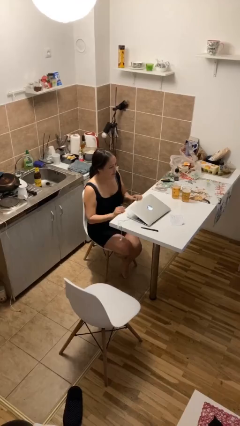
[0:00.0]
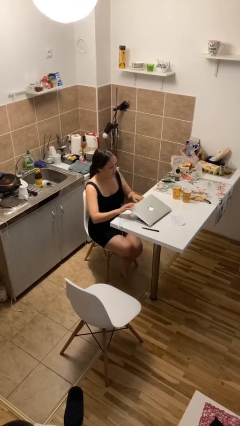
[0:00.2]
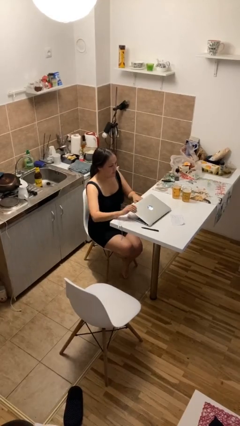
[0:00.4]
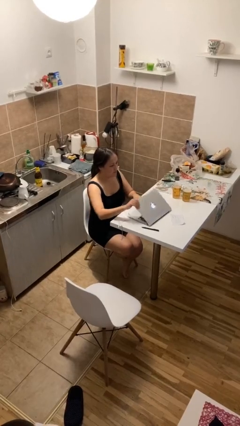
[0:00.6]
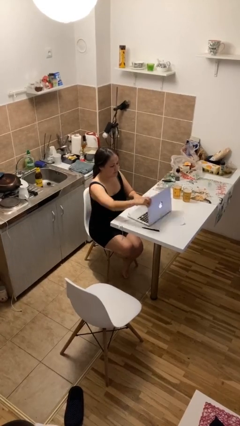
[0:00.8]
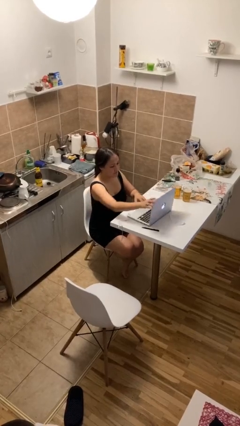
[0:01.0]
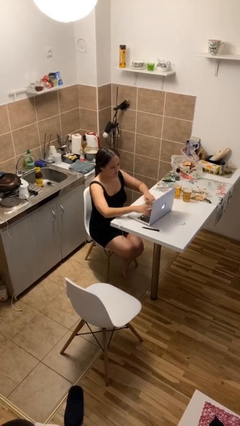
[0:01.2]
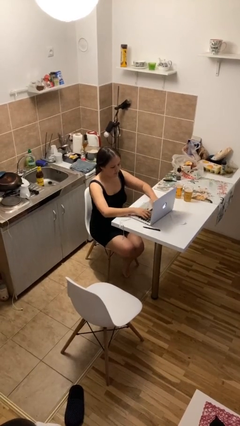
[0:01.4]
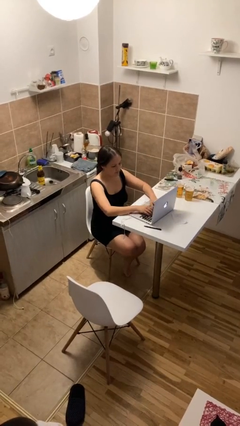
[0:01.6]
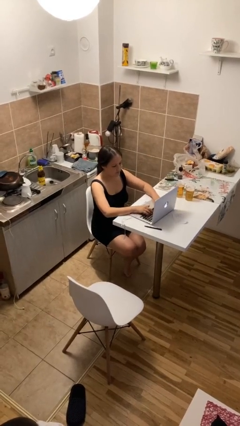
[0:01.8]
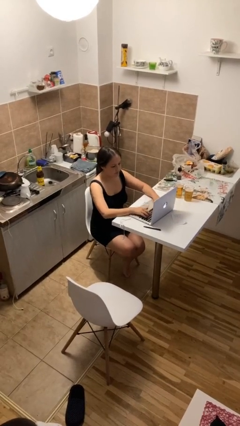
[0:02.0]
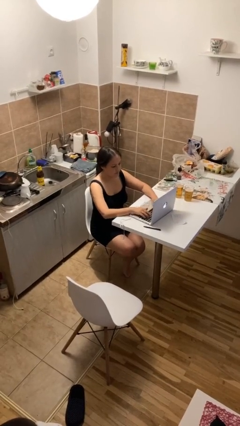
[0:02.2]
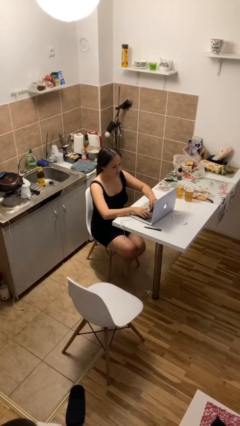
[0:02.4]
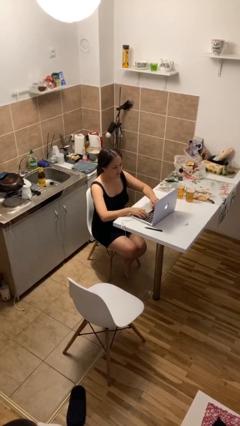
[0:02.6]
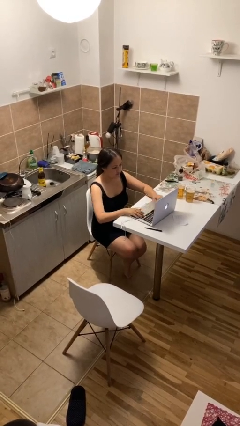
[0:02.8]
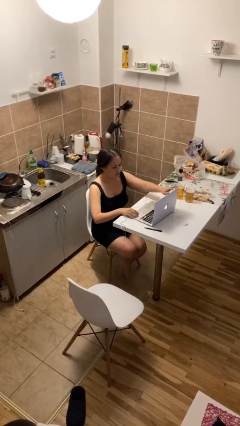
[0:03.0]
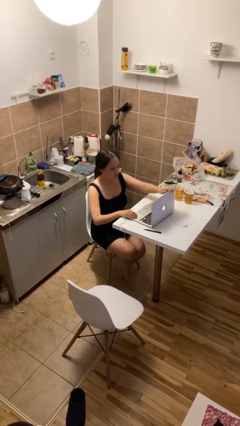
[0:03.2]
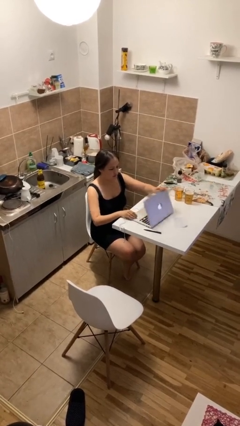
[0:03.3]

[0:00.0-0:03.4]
person interacts with laptop

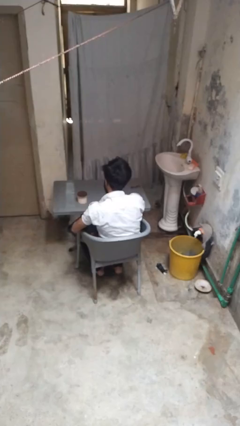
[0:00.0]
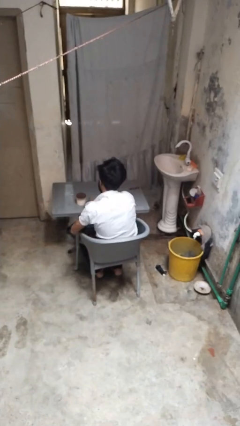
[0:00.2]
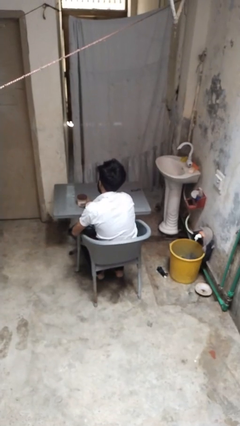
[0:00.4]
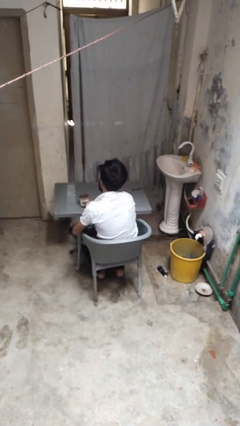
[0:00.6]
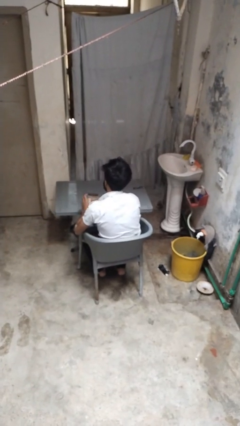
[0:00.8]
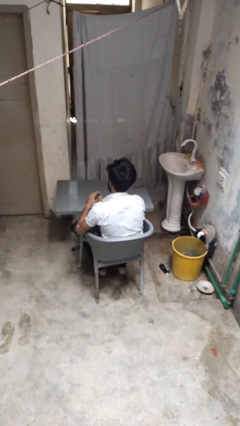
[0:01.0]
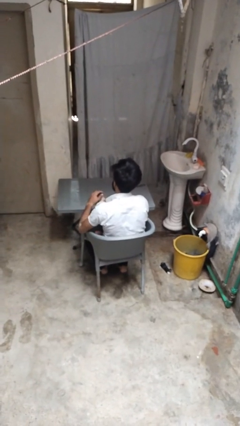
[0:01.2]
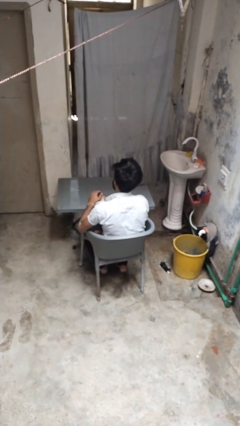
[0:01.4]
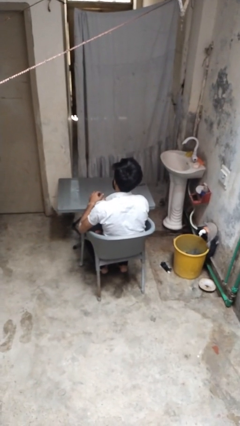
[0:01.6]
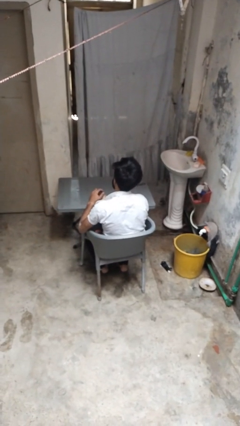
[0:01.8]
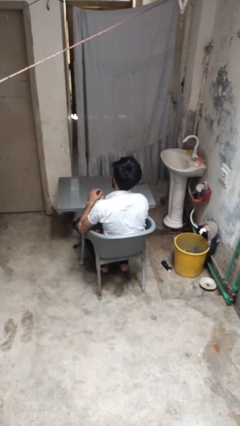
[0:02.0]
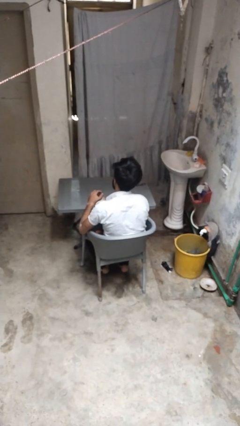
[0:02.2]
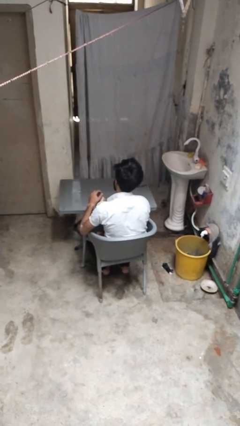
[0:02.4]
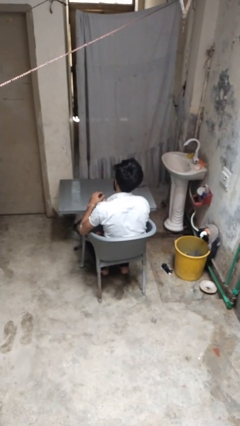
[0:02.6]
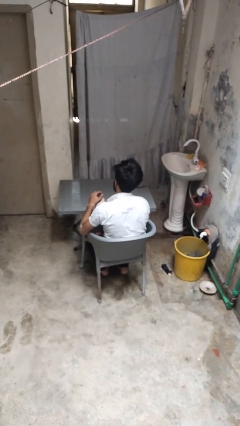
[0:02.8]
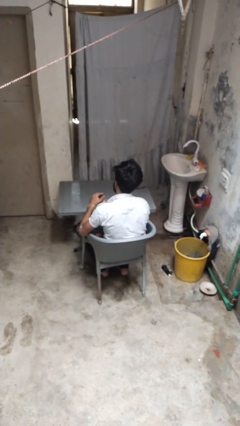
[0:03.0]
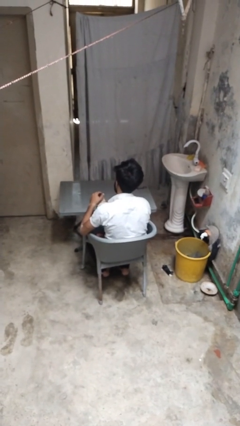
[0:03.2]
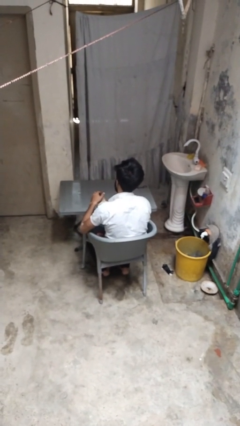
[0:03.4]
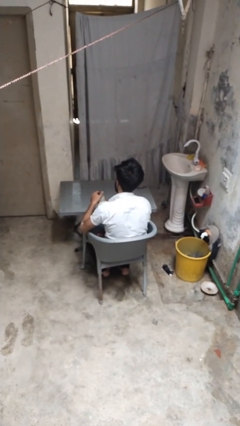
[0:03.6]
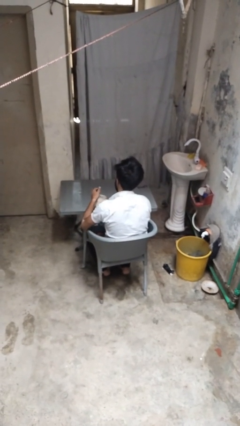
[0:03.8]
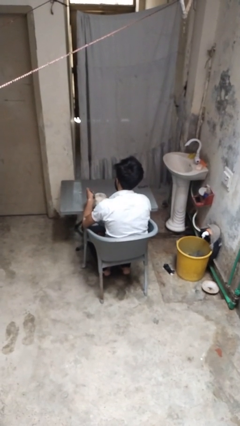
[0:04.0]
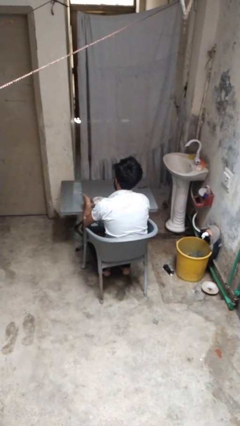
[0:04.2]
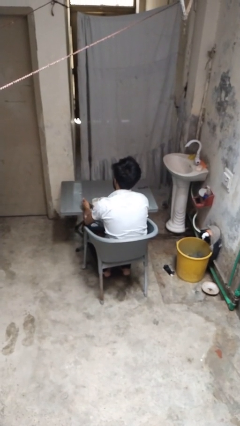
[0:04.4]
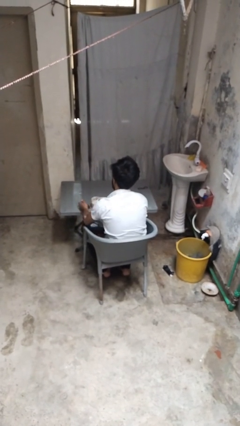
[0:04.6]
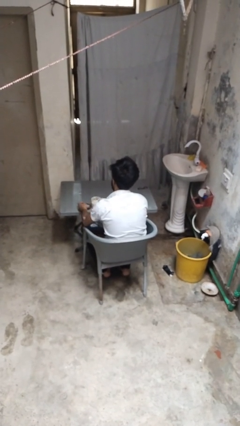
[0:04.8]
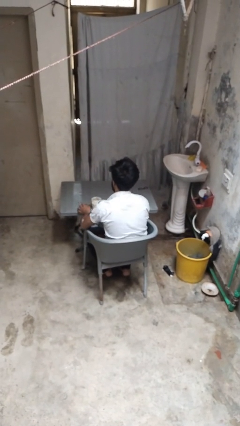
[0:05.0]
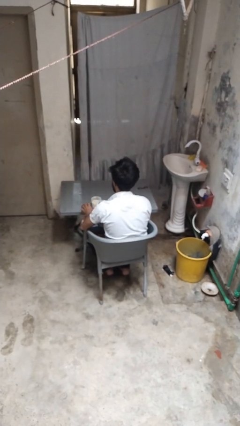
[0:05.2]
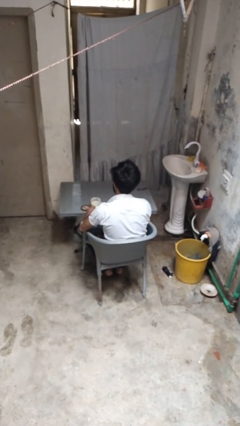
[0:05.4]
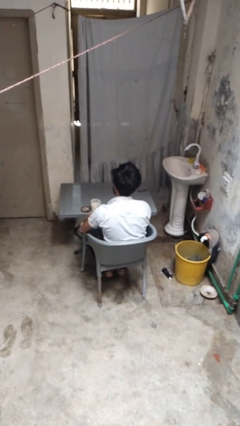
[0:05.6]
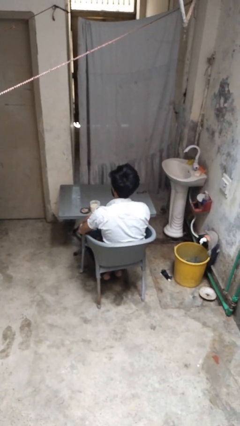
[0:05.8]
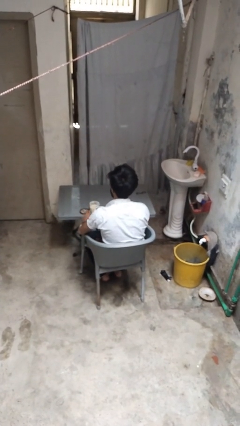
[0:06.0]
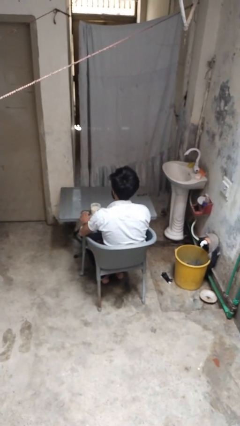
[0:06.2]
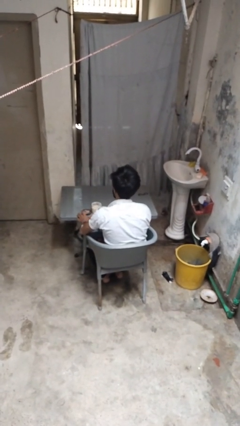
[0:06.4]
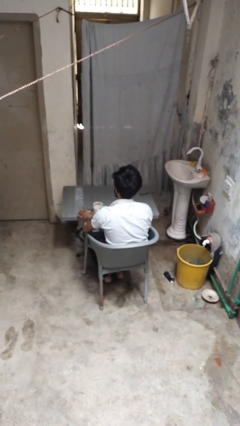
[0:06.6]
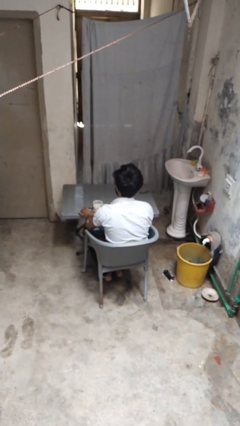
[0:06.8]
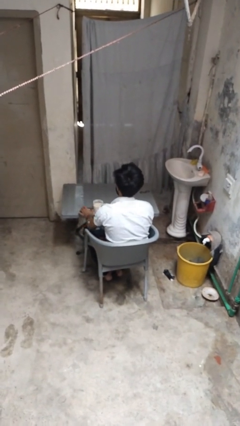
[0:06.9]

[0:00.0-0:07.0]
person opens jar

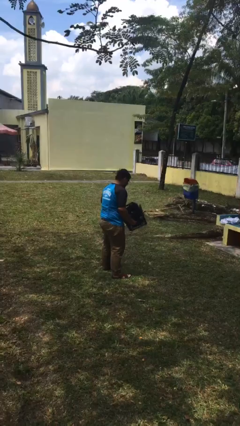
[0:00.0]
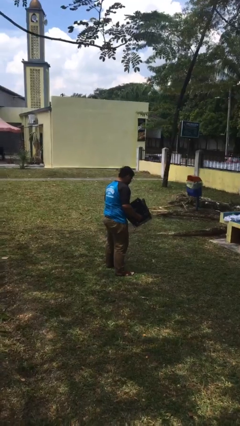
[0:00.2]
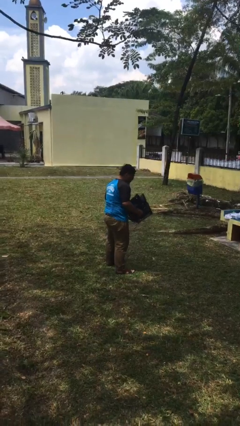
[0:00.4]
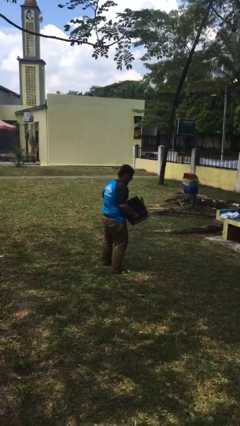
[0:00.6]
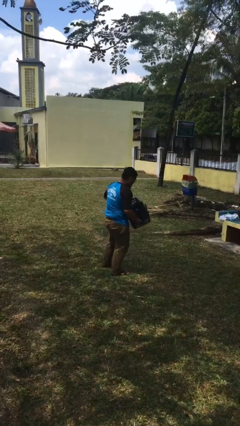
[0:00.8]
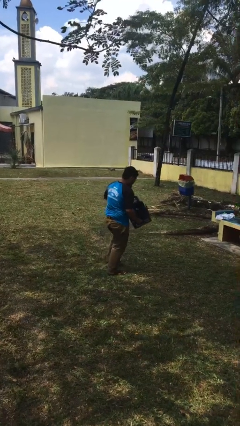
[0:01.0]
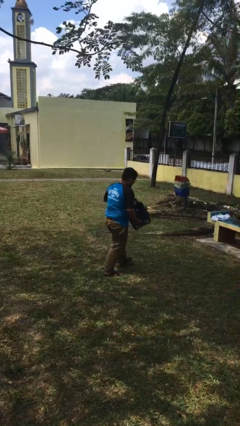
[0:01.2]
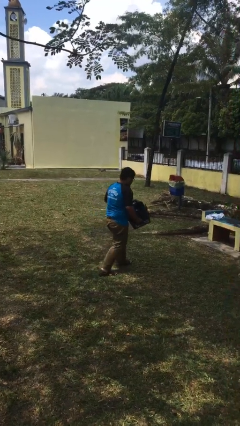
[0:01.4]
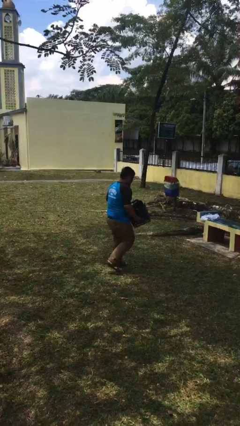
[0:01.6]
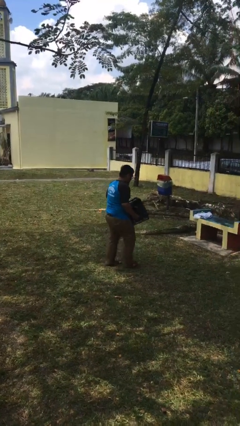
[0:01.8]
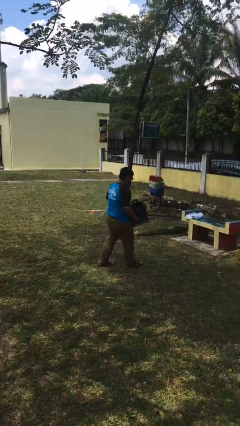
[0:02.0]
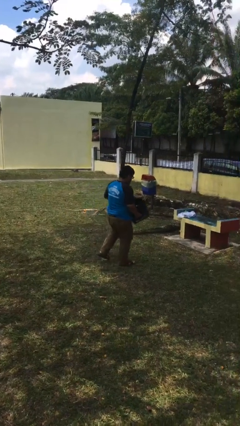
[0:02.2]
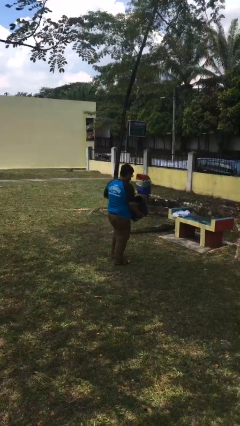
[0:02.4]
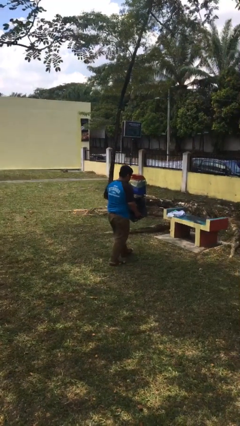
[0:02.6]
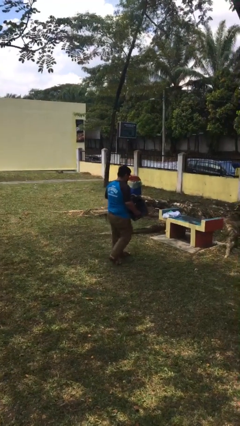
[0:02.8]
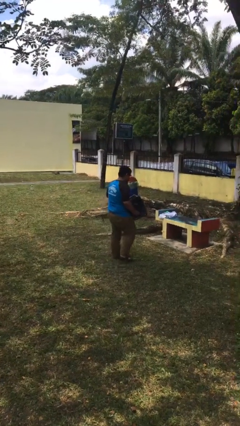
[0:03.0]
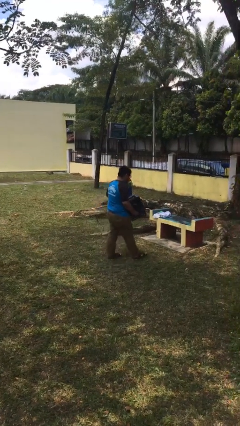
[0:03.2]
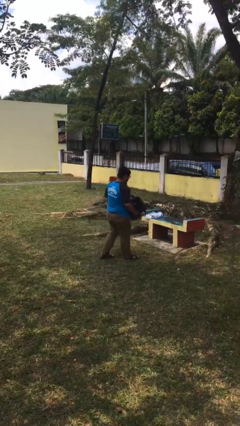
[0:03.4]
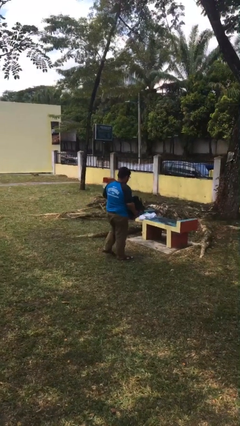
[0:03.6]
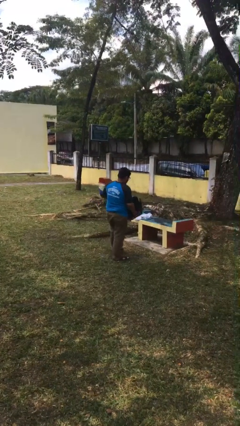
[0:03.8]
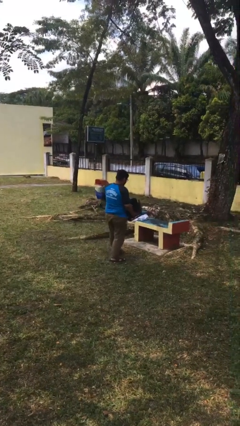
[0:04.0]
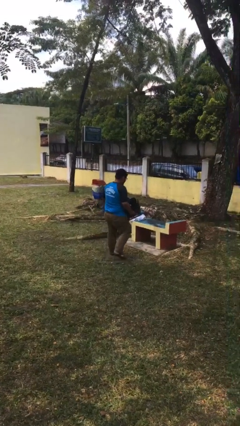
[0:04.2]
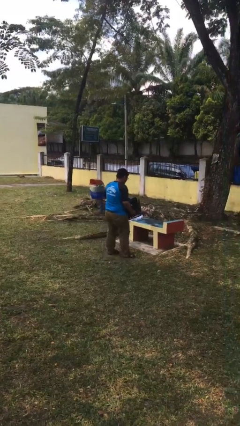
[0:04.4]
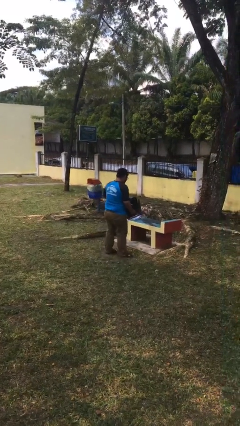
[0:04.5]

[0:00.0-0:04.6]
person carries heavy object

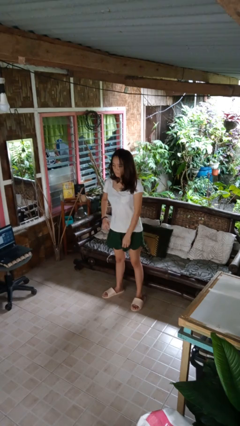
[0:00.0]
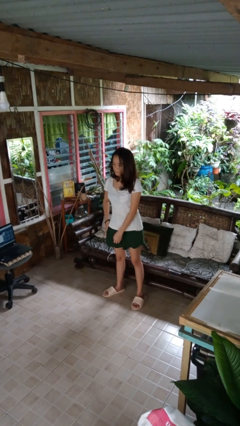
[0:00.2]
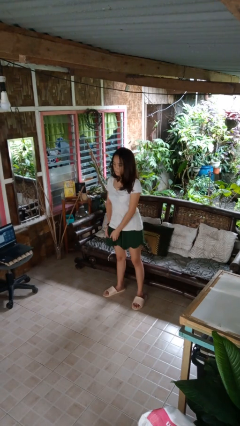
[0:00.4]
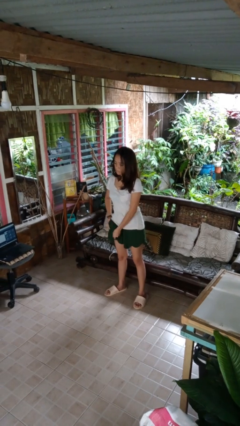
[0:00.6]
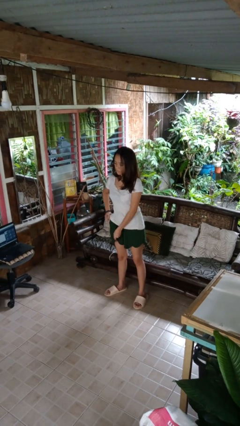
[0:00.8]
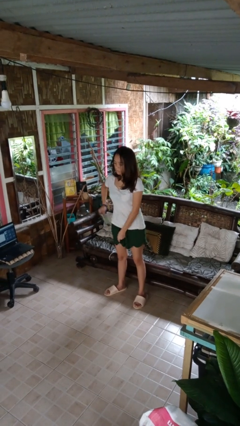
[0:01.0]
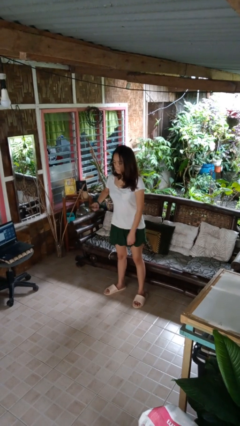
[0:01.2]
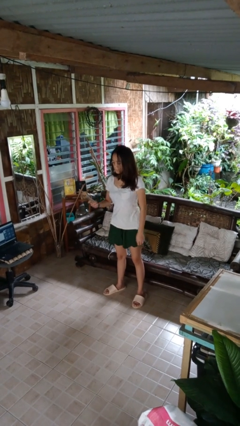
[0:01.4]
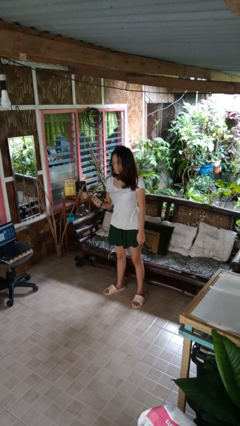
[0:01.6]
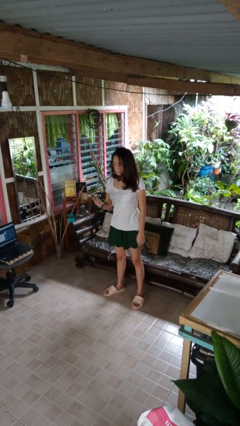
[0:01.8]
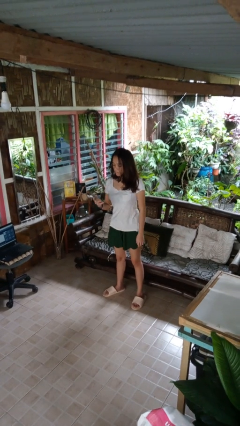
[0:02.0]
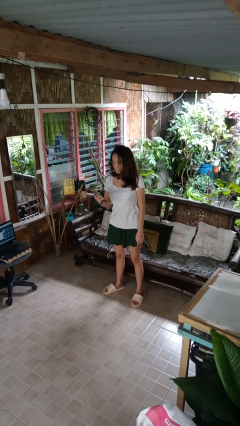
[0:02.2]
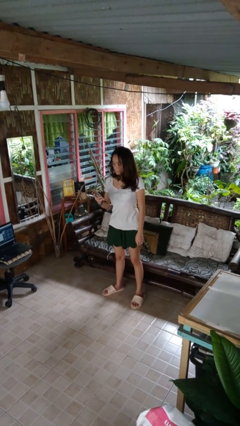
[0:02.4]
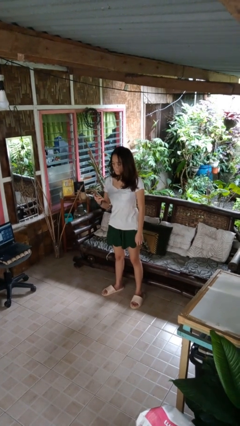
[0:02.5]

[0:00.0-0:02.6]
person takes phone from pocket
